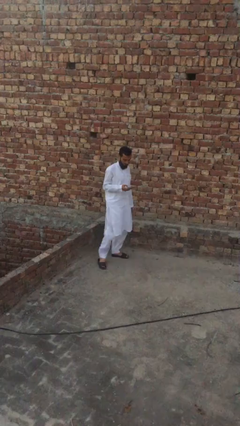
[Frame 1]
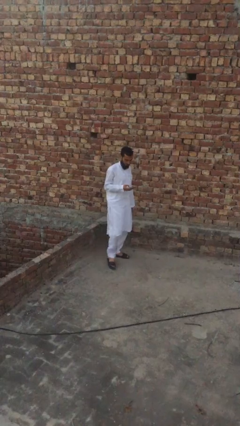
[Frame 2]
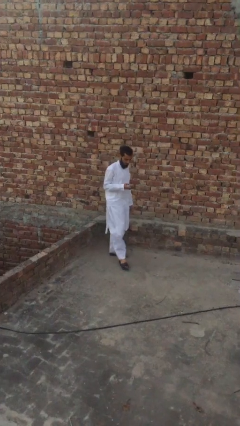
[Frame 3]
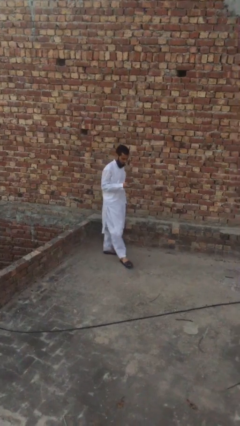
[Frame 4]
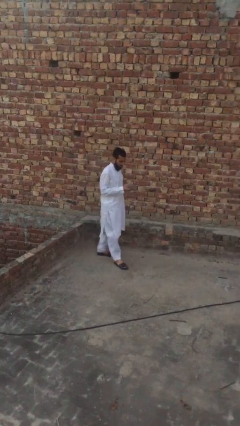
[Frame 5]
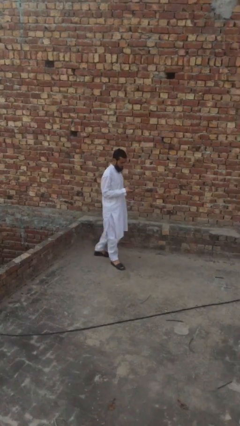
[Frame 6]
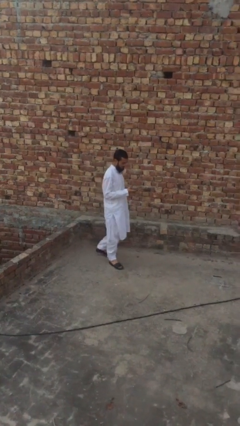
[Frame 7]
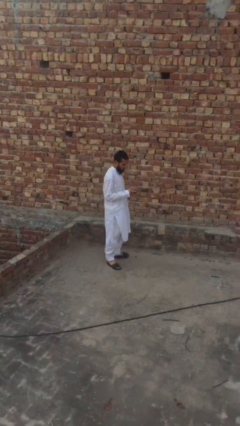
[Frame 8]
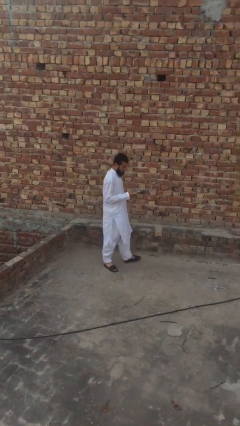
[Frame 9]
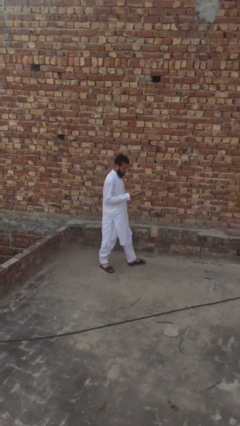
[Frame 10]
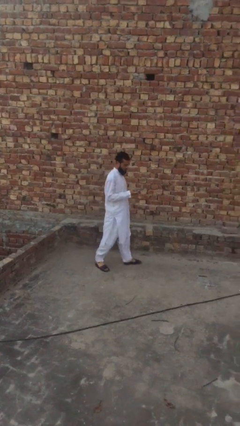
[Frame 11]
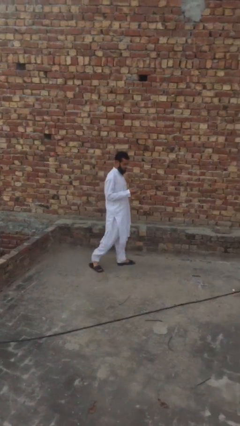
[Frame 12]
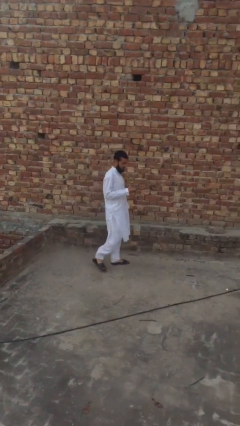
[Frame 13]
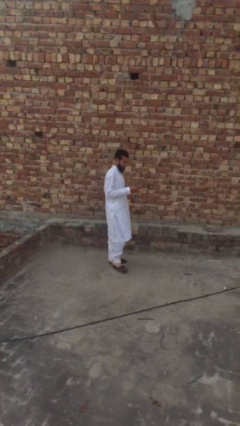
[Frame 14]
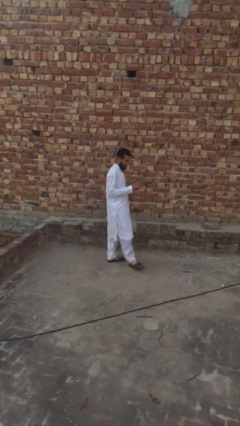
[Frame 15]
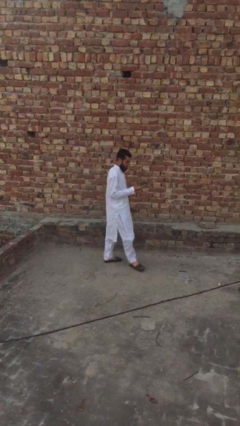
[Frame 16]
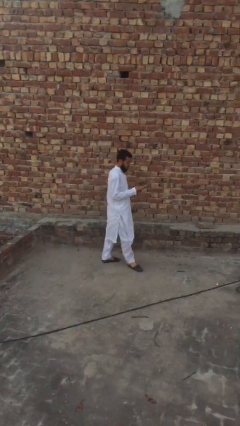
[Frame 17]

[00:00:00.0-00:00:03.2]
person texts on phone

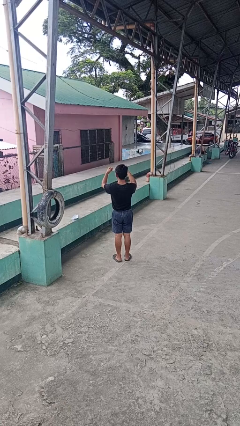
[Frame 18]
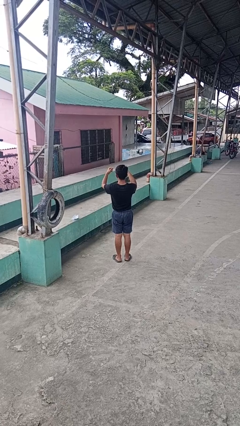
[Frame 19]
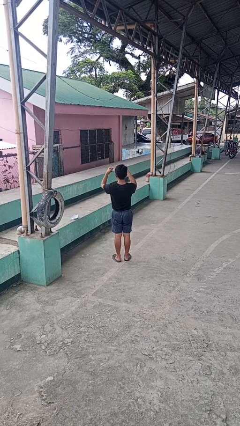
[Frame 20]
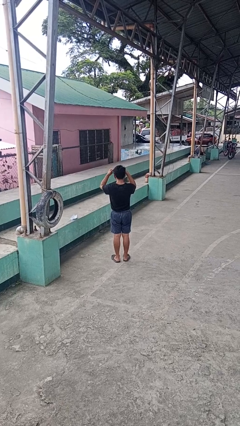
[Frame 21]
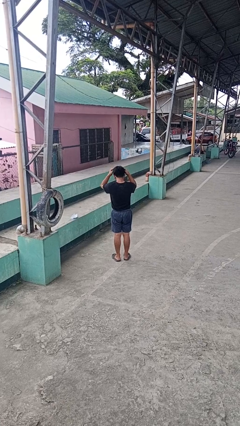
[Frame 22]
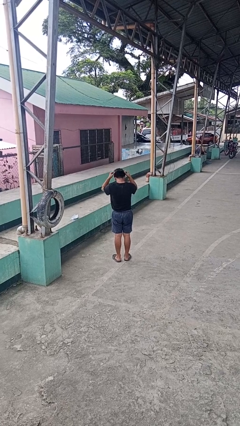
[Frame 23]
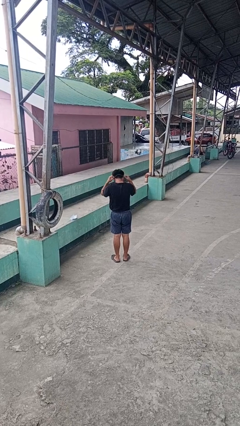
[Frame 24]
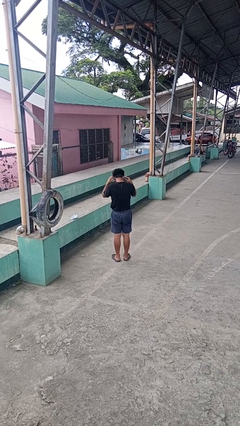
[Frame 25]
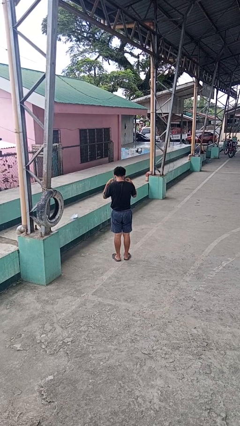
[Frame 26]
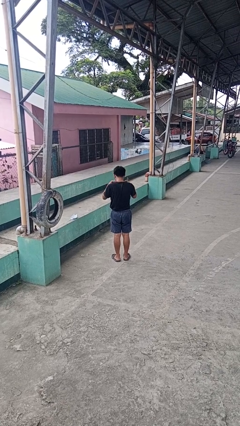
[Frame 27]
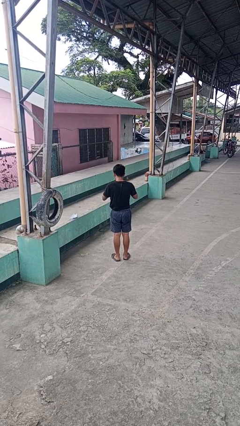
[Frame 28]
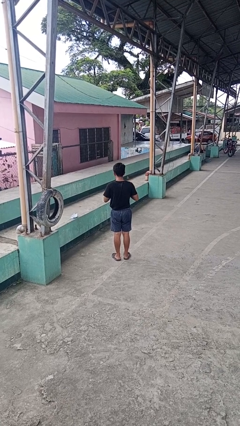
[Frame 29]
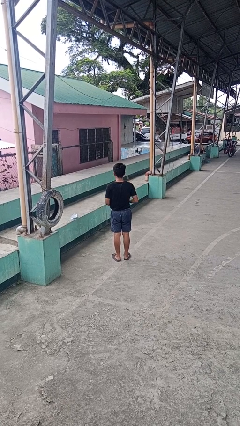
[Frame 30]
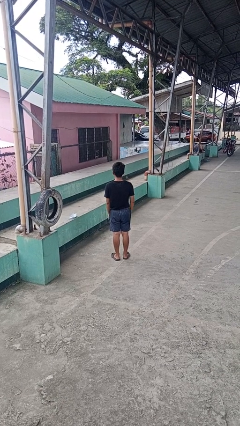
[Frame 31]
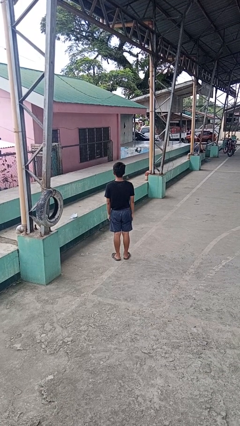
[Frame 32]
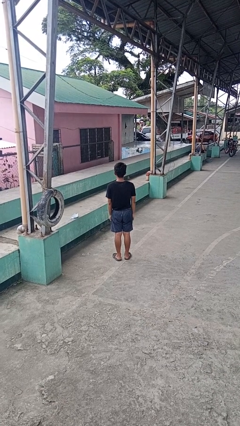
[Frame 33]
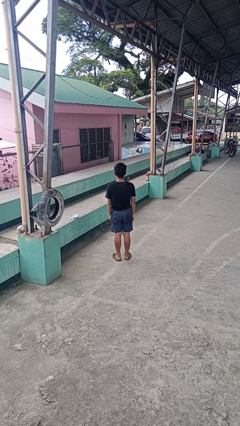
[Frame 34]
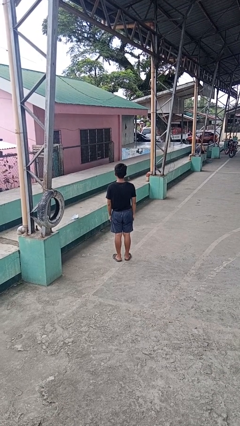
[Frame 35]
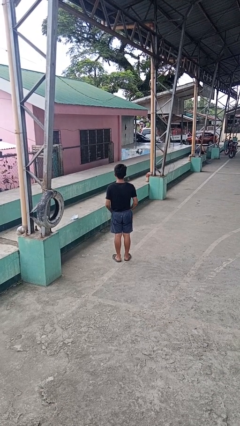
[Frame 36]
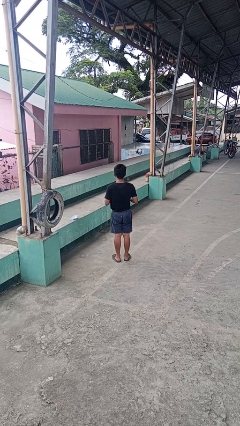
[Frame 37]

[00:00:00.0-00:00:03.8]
person puts on necklace

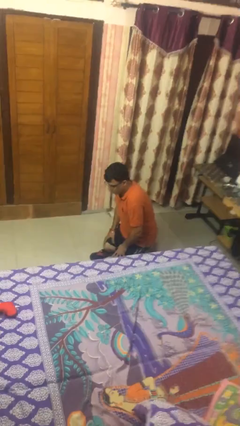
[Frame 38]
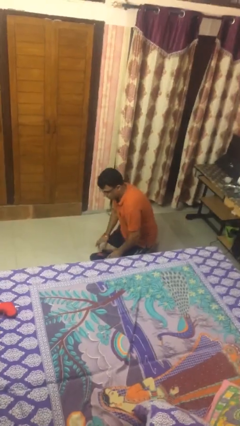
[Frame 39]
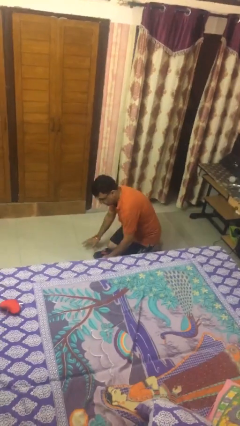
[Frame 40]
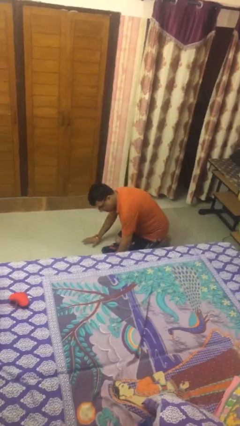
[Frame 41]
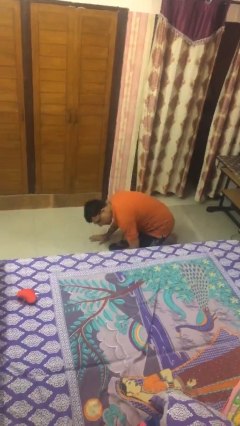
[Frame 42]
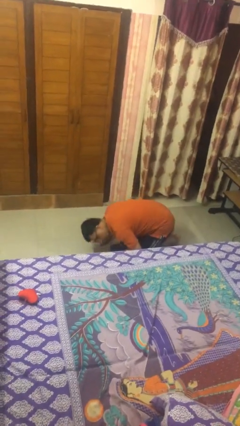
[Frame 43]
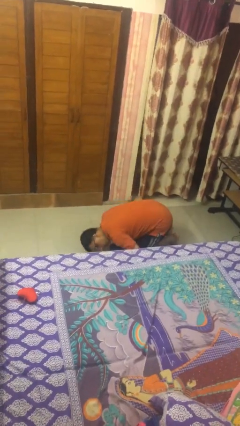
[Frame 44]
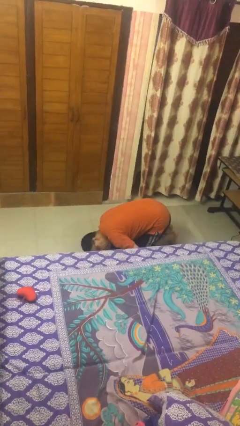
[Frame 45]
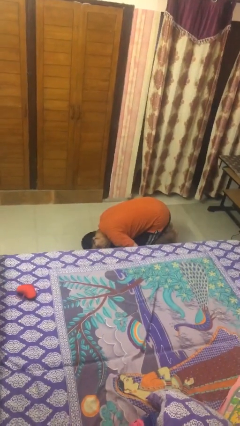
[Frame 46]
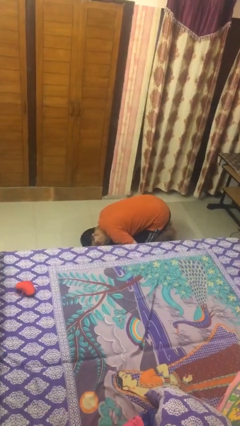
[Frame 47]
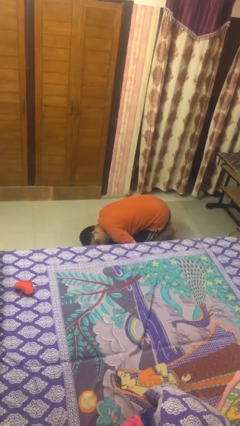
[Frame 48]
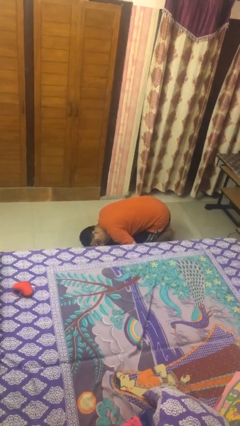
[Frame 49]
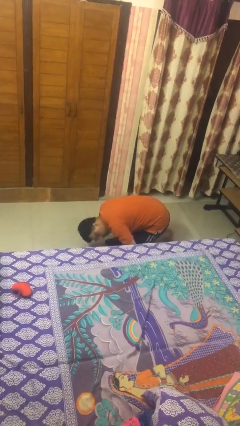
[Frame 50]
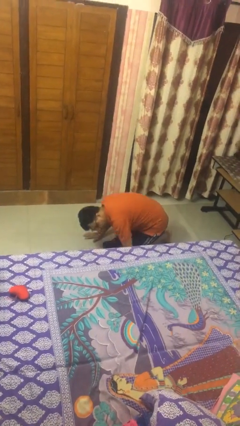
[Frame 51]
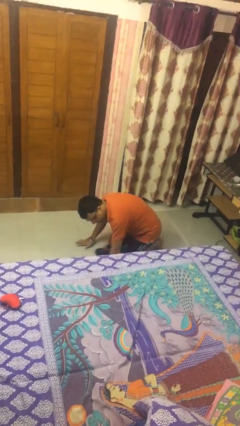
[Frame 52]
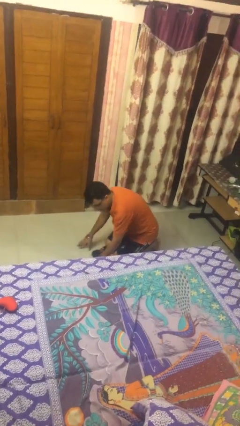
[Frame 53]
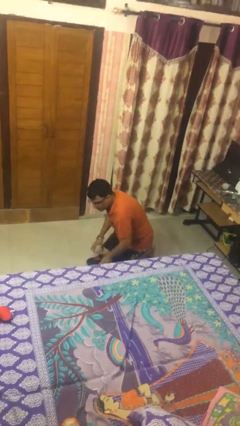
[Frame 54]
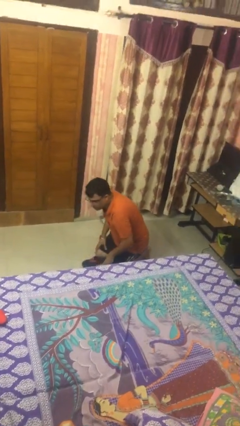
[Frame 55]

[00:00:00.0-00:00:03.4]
person searches under bed

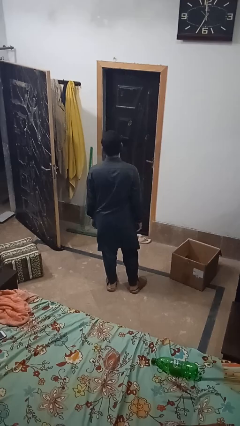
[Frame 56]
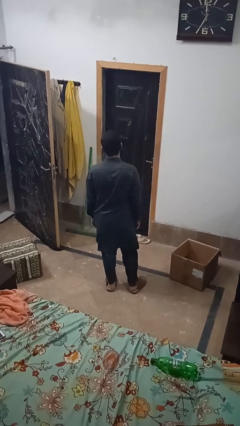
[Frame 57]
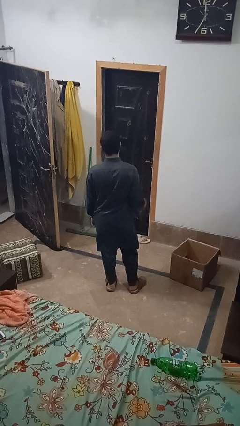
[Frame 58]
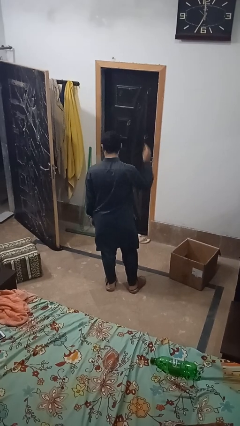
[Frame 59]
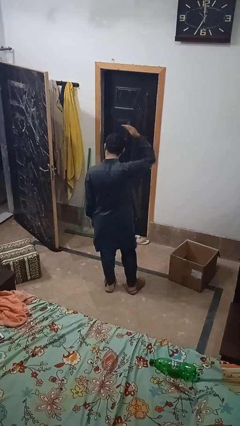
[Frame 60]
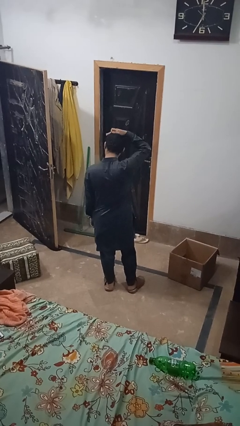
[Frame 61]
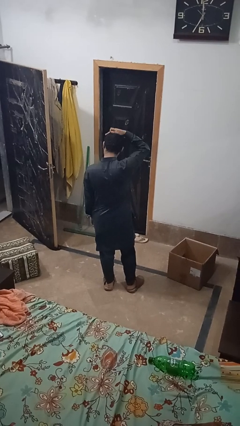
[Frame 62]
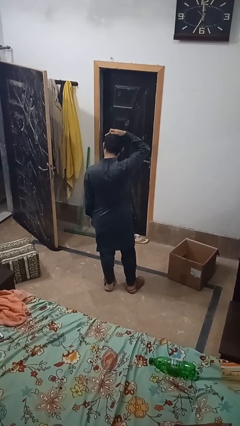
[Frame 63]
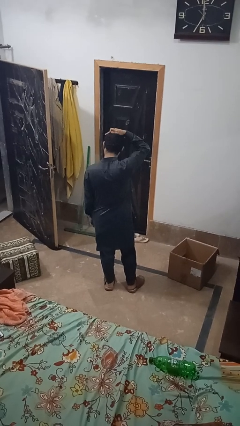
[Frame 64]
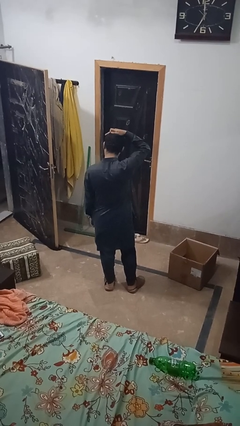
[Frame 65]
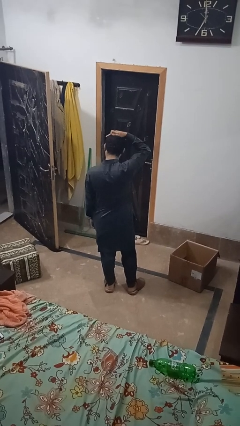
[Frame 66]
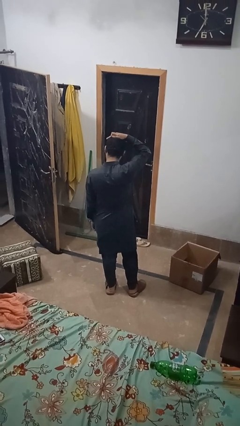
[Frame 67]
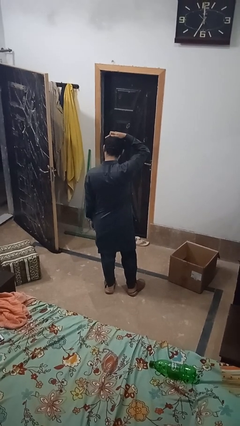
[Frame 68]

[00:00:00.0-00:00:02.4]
person pats head

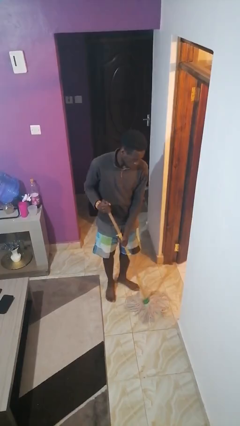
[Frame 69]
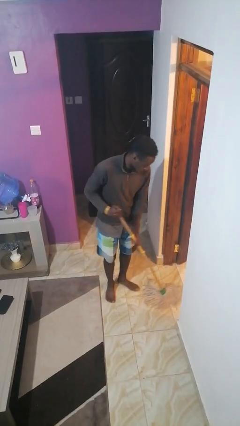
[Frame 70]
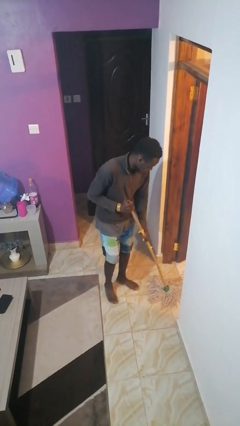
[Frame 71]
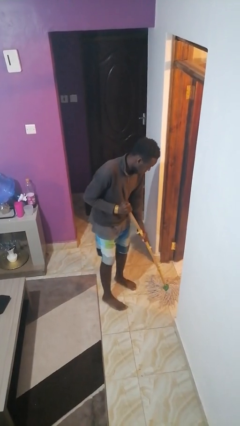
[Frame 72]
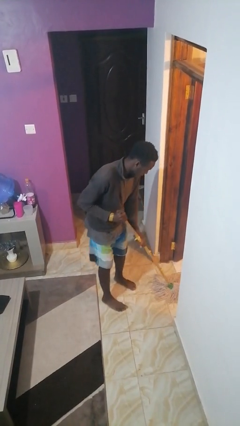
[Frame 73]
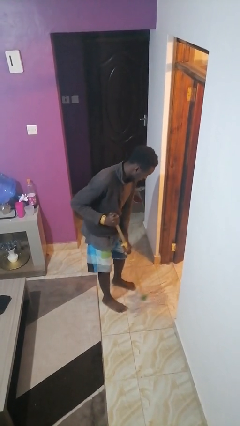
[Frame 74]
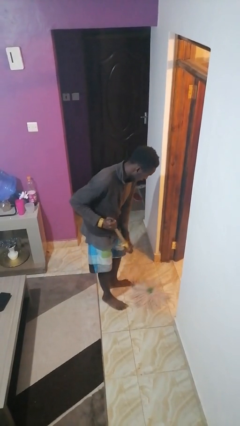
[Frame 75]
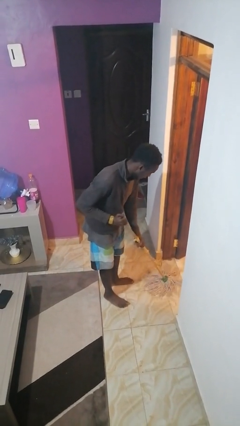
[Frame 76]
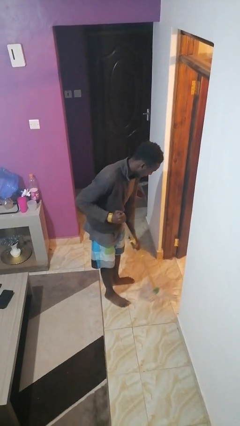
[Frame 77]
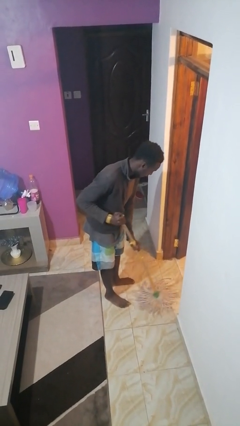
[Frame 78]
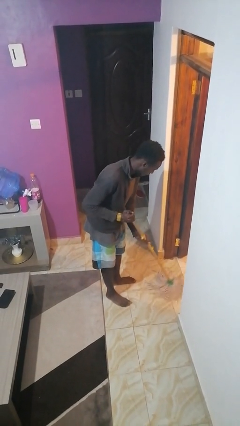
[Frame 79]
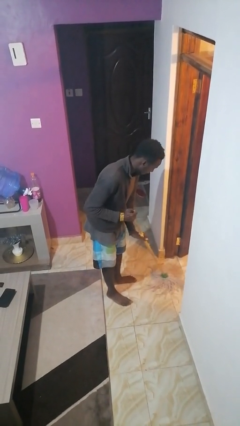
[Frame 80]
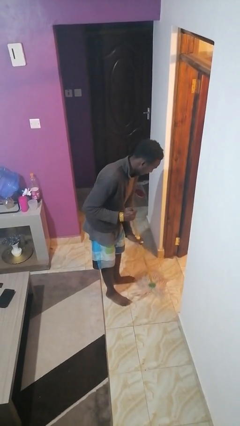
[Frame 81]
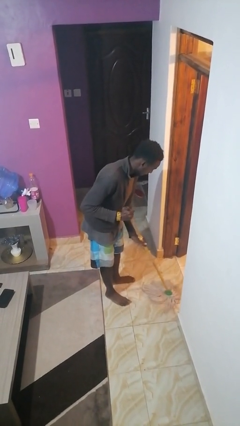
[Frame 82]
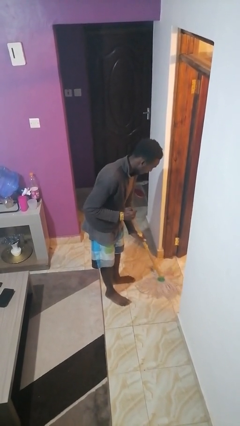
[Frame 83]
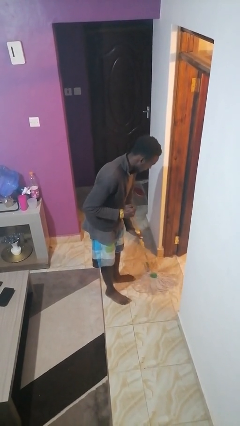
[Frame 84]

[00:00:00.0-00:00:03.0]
person mops

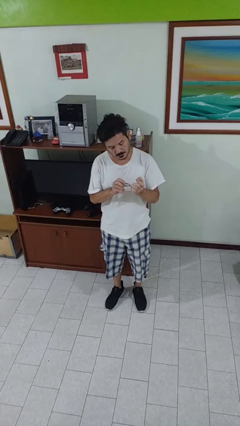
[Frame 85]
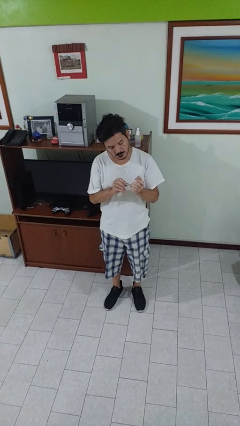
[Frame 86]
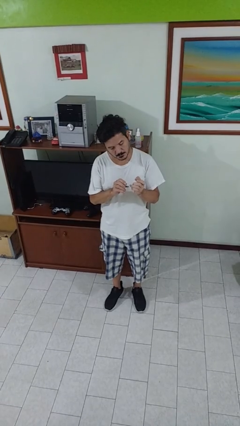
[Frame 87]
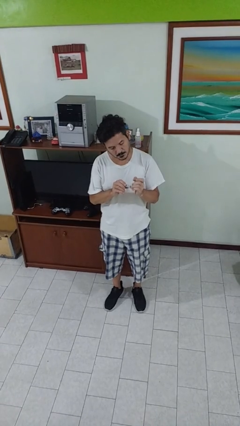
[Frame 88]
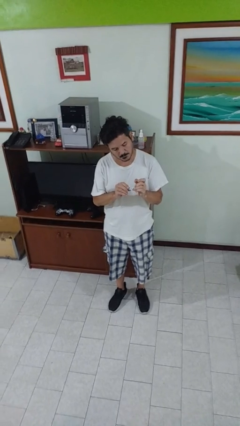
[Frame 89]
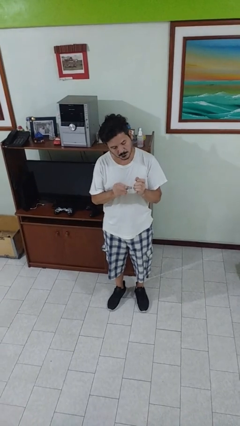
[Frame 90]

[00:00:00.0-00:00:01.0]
person clips fingernails

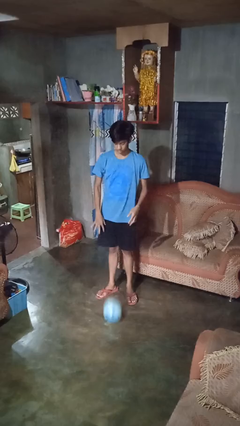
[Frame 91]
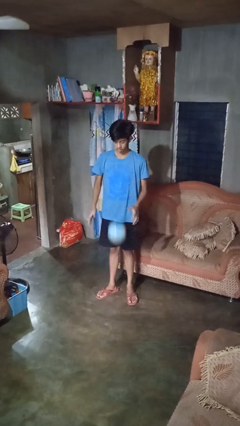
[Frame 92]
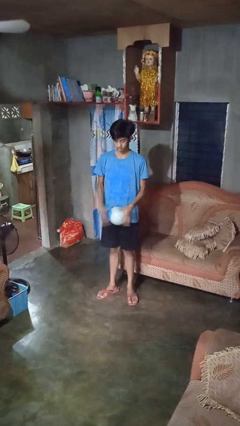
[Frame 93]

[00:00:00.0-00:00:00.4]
person bounces ball on floor
